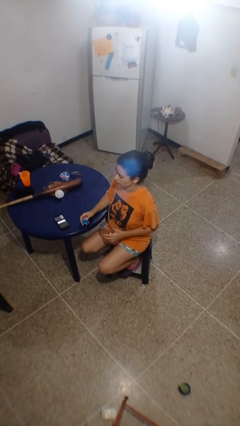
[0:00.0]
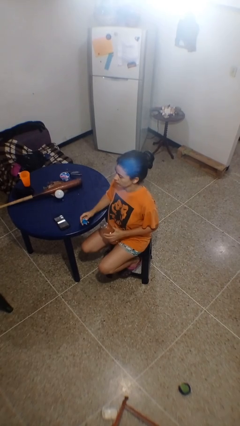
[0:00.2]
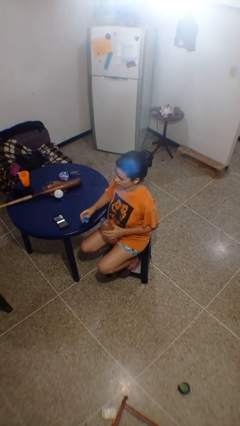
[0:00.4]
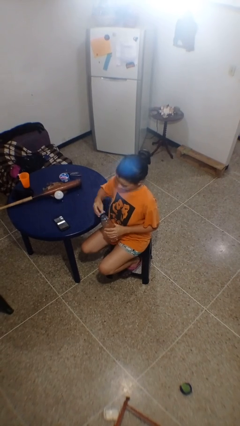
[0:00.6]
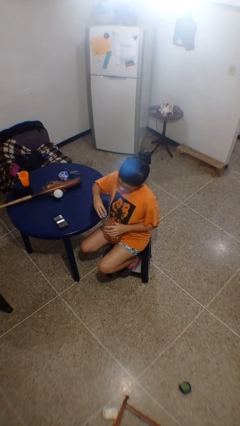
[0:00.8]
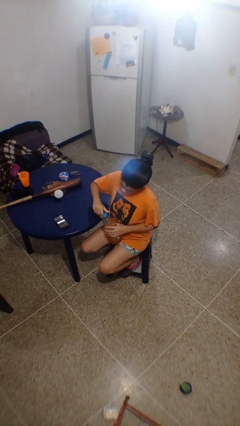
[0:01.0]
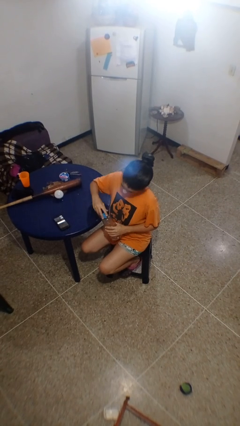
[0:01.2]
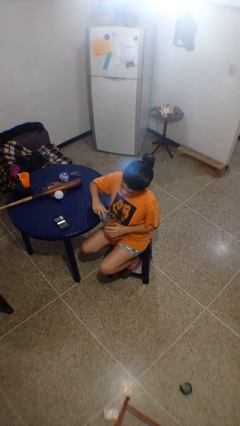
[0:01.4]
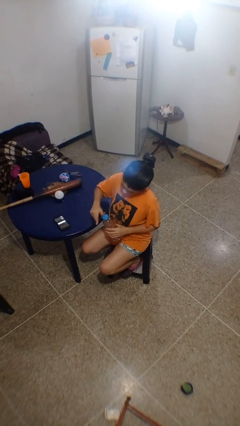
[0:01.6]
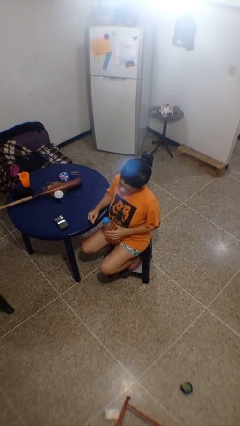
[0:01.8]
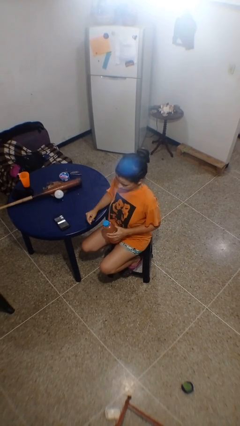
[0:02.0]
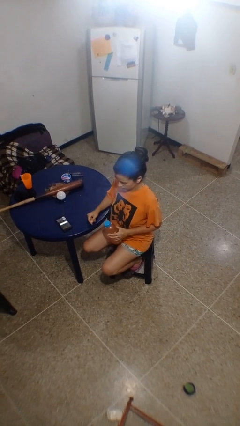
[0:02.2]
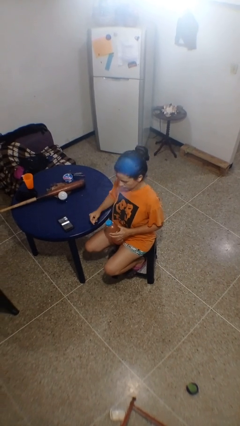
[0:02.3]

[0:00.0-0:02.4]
person screws lid to bottle

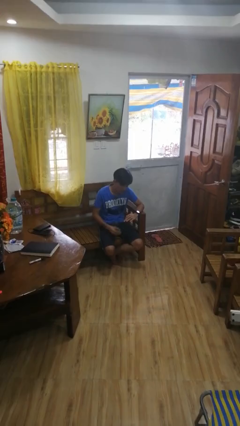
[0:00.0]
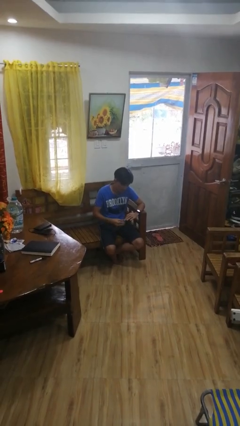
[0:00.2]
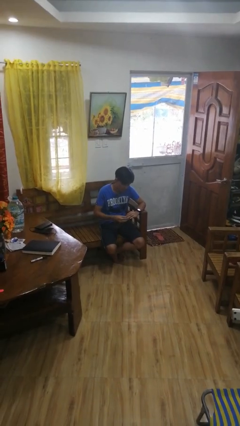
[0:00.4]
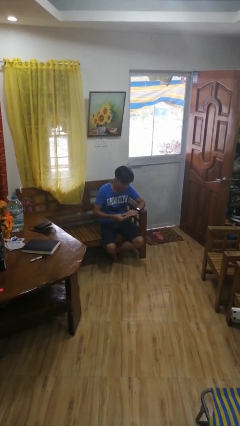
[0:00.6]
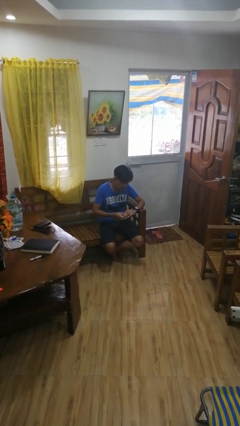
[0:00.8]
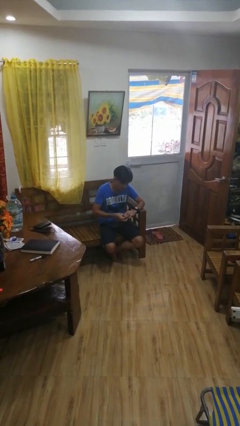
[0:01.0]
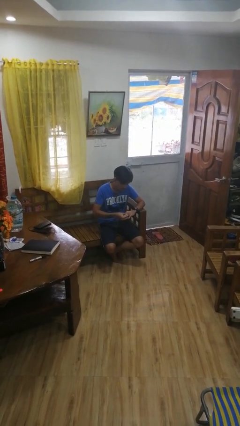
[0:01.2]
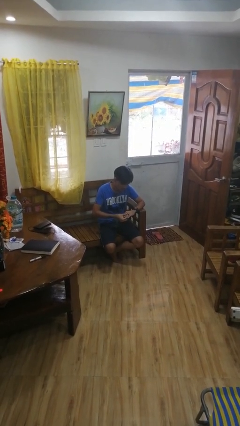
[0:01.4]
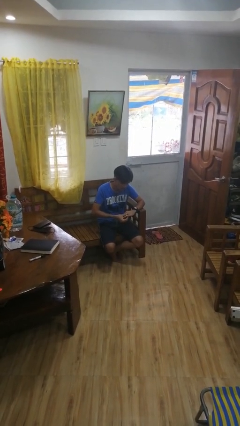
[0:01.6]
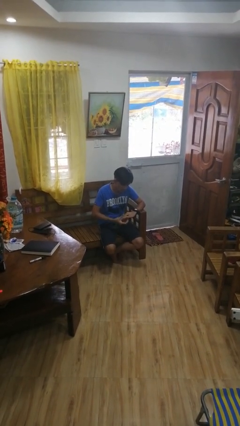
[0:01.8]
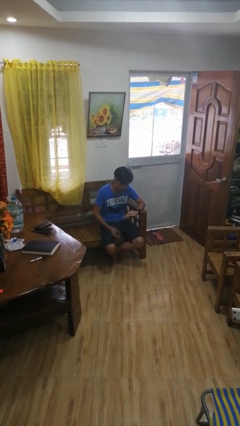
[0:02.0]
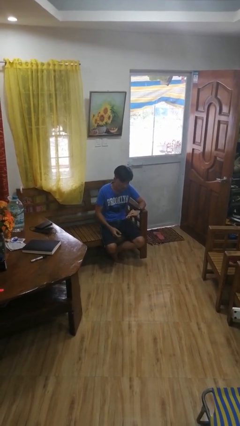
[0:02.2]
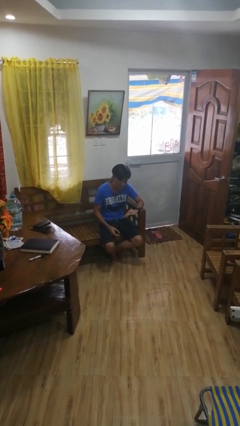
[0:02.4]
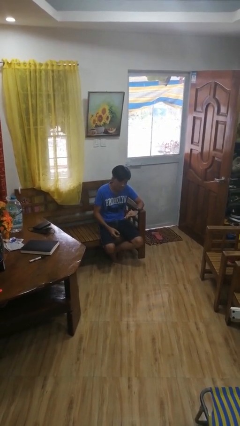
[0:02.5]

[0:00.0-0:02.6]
person puts on ring

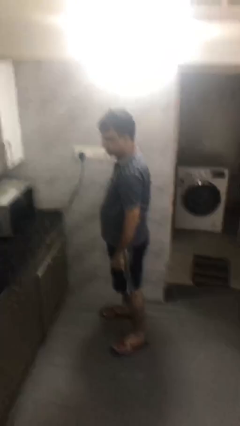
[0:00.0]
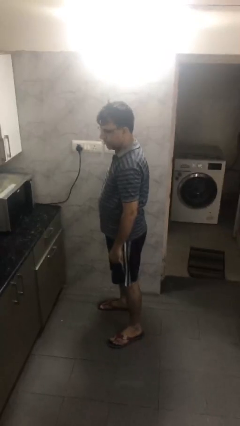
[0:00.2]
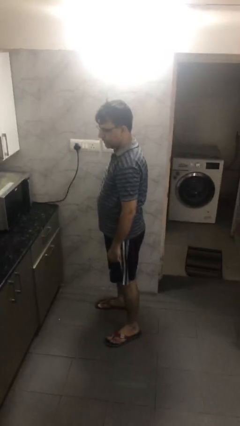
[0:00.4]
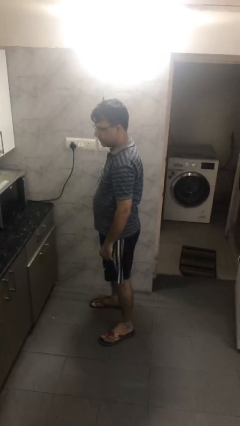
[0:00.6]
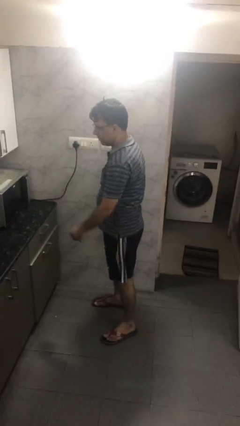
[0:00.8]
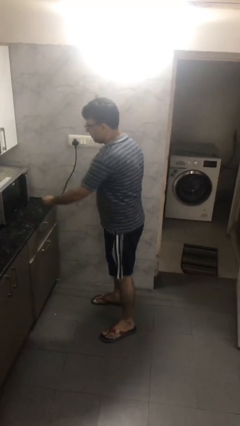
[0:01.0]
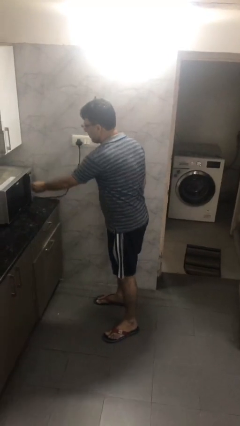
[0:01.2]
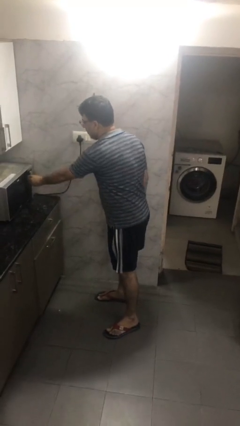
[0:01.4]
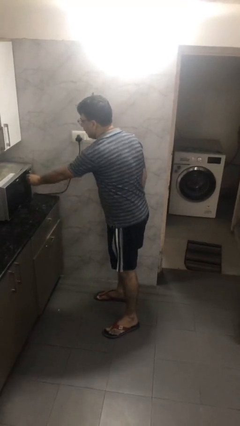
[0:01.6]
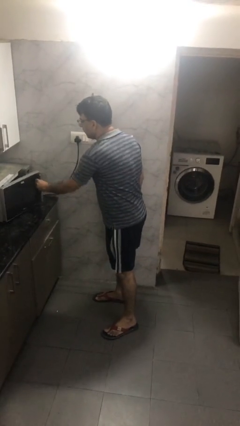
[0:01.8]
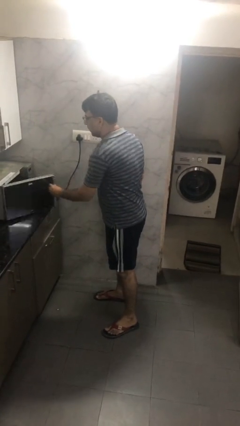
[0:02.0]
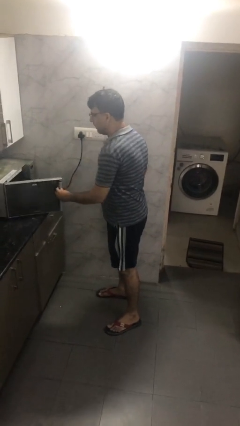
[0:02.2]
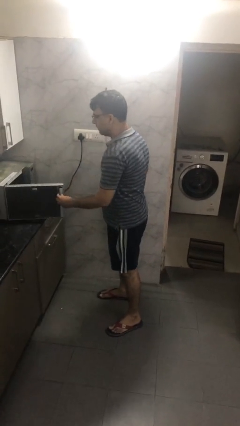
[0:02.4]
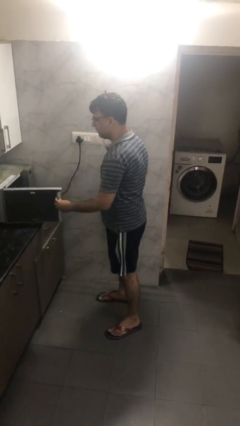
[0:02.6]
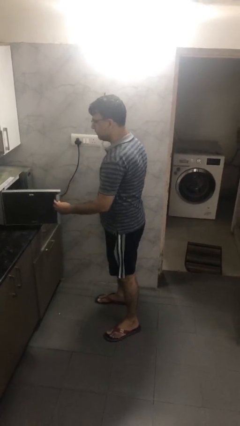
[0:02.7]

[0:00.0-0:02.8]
person opens microwave

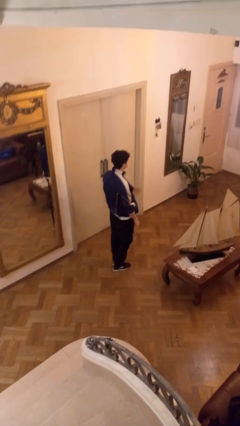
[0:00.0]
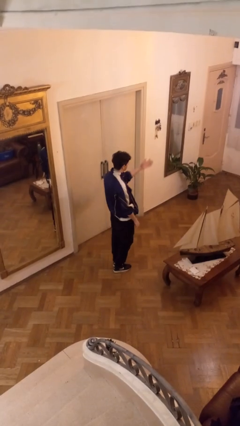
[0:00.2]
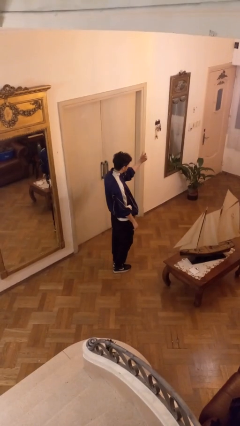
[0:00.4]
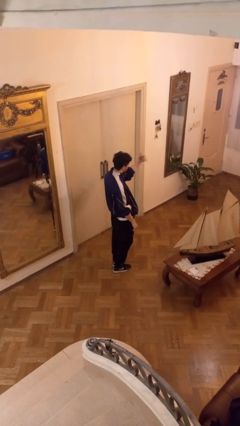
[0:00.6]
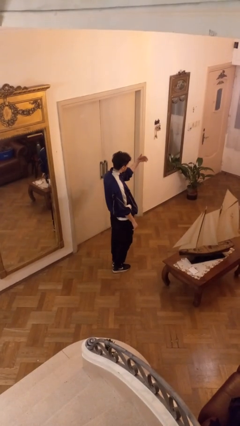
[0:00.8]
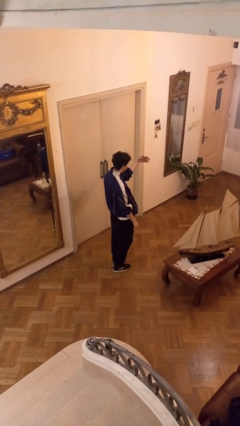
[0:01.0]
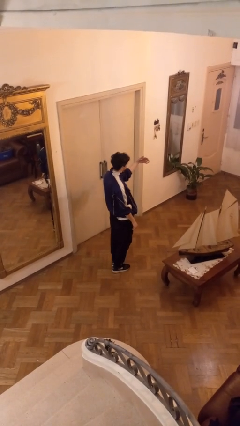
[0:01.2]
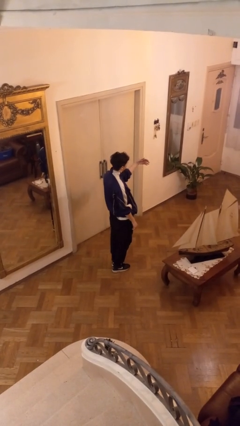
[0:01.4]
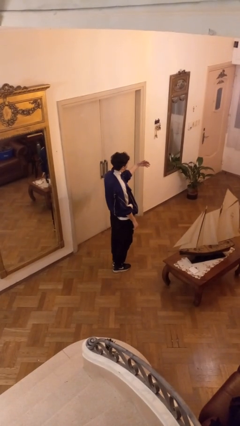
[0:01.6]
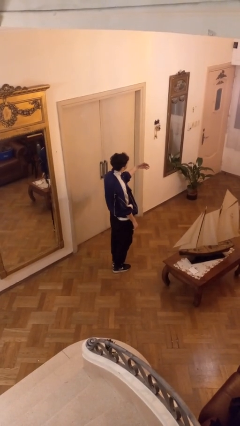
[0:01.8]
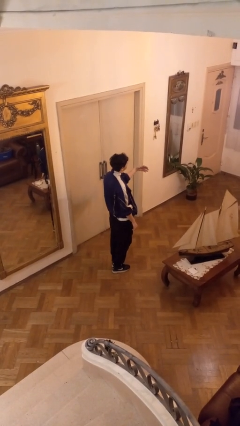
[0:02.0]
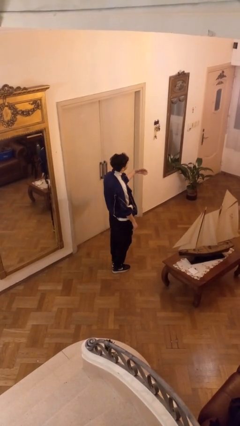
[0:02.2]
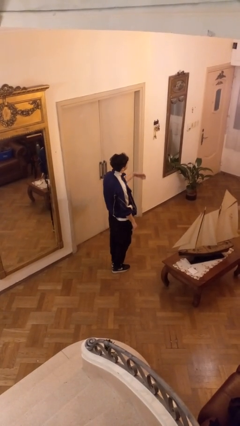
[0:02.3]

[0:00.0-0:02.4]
person gestures come here

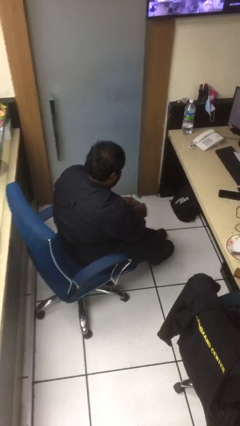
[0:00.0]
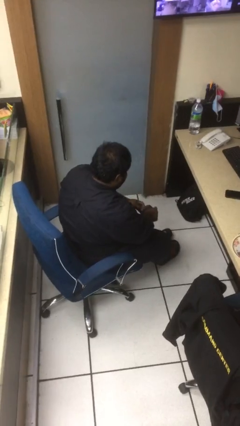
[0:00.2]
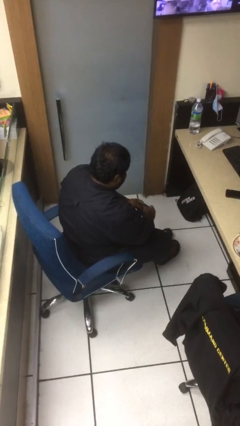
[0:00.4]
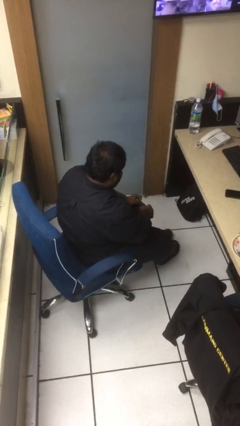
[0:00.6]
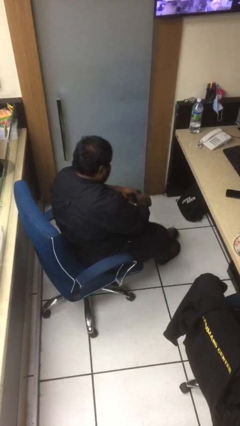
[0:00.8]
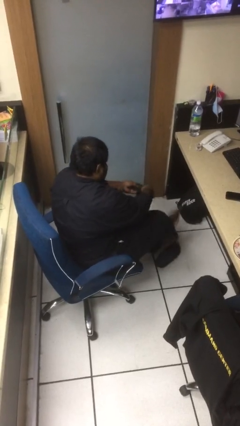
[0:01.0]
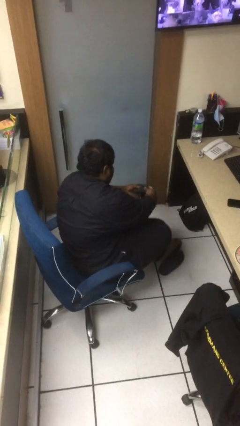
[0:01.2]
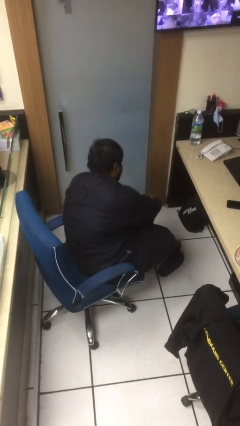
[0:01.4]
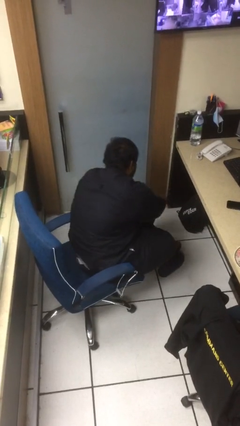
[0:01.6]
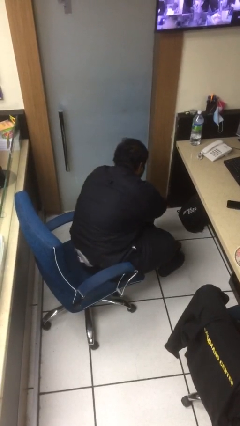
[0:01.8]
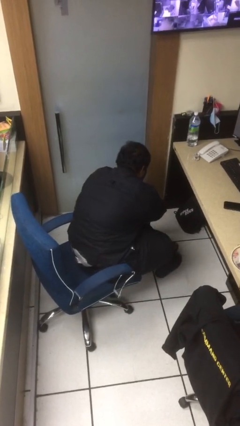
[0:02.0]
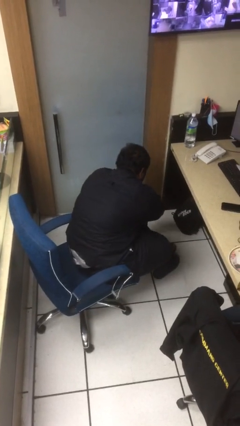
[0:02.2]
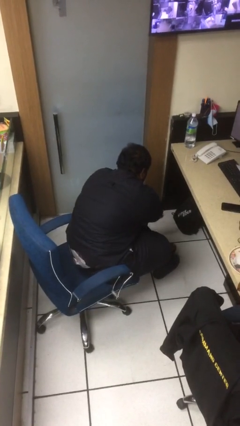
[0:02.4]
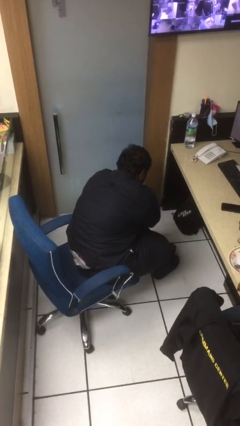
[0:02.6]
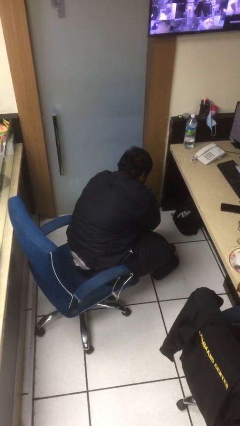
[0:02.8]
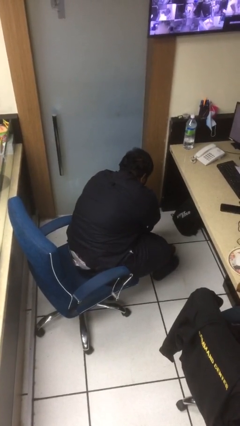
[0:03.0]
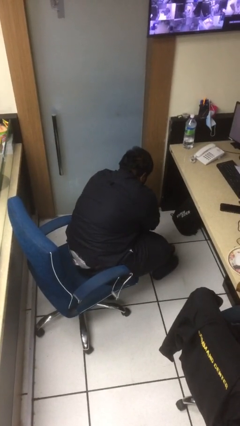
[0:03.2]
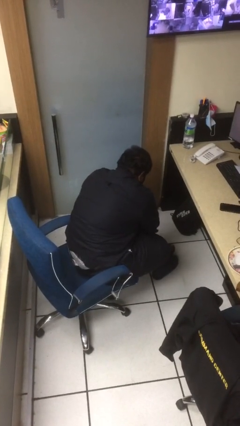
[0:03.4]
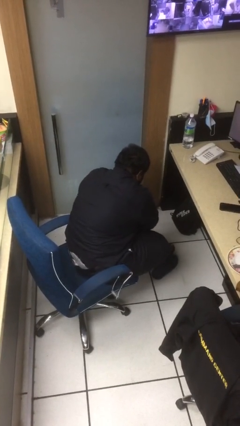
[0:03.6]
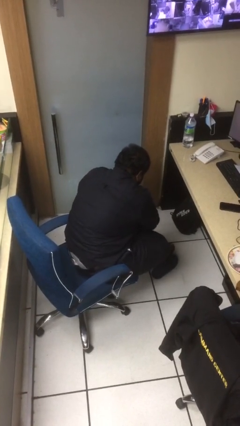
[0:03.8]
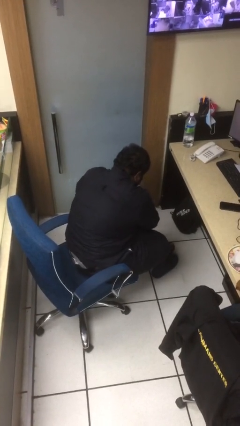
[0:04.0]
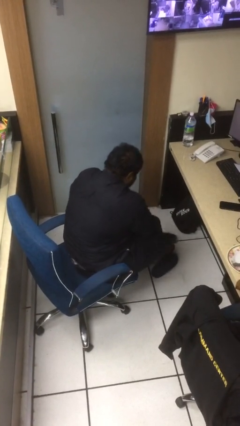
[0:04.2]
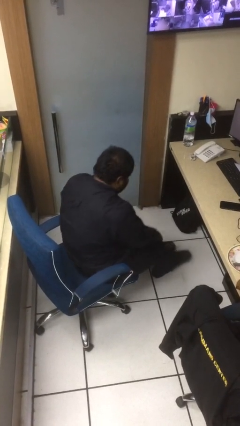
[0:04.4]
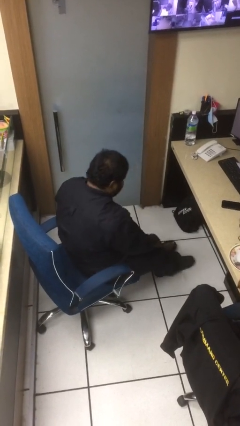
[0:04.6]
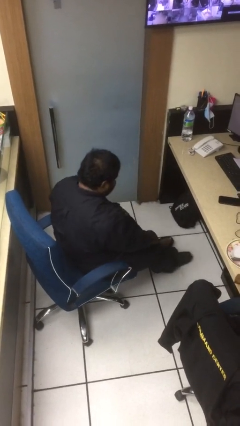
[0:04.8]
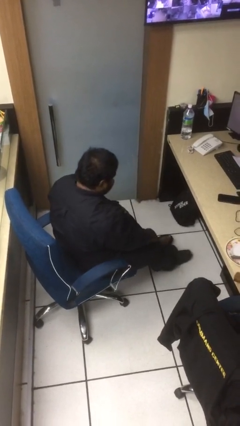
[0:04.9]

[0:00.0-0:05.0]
person puts on socks

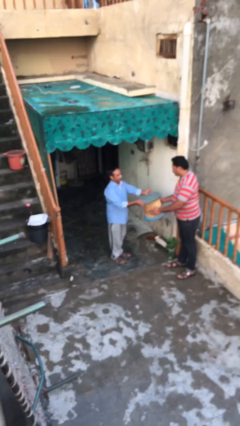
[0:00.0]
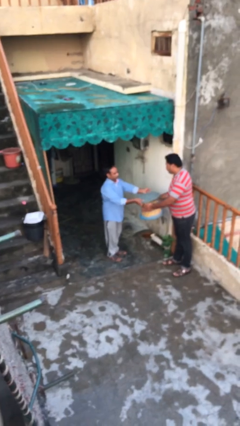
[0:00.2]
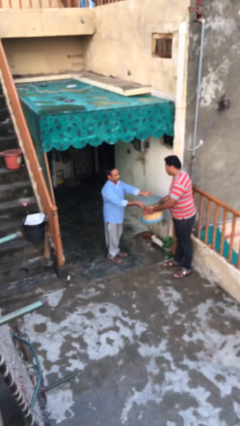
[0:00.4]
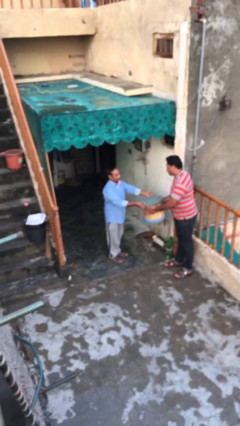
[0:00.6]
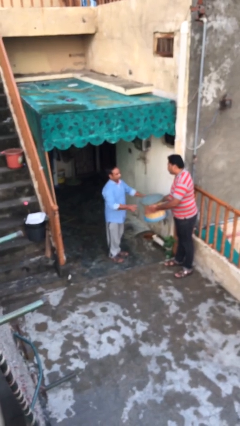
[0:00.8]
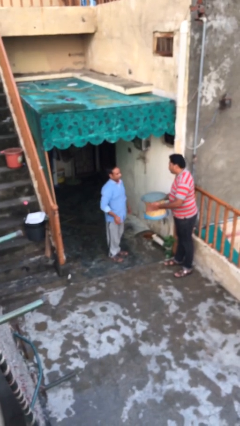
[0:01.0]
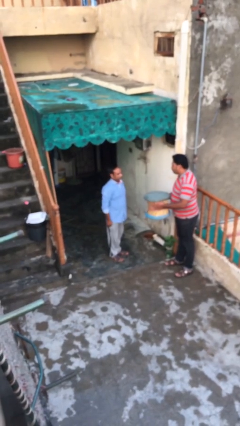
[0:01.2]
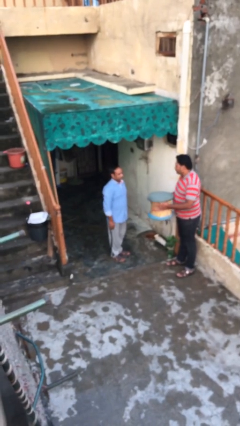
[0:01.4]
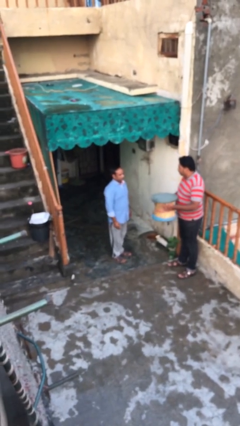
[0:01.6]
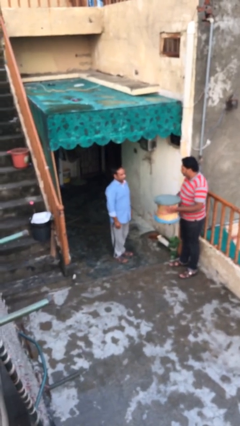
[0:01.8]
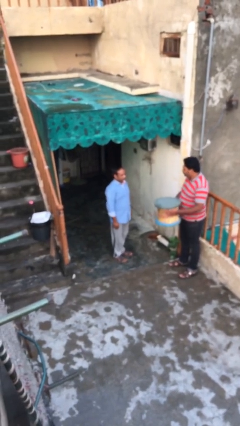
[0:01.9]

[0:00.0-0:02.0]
person transfers object to person

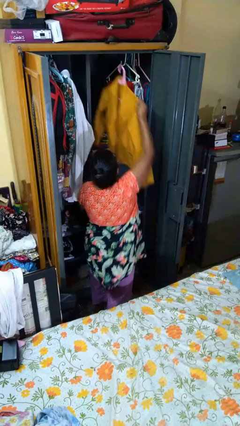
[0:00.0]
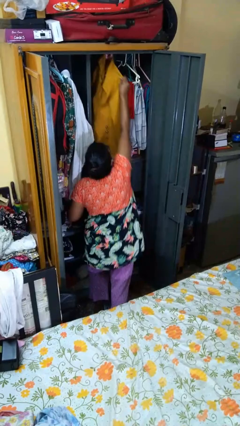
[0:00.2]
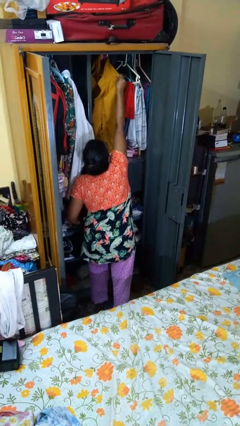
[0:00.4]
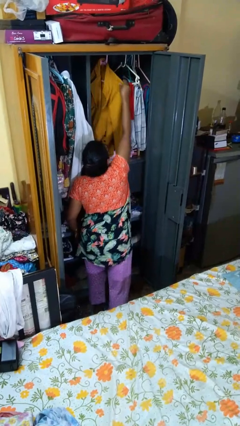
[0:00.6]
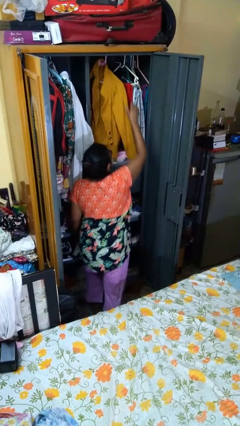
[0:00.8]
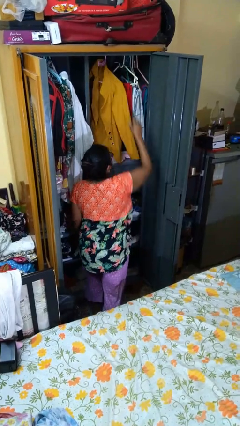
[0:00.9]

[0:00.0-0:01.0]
person puts clothes into closet
